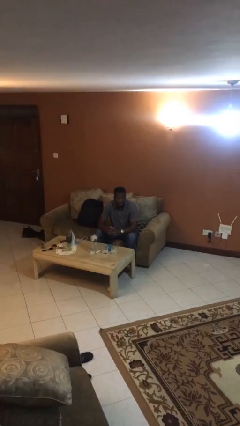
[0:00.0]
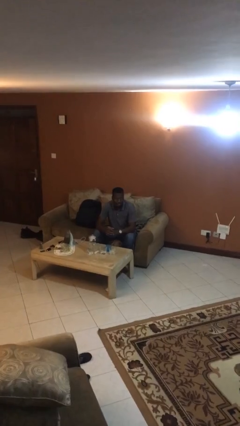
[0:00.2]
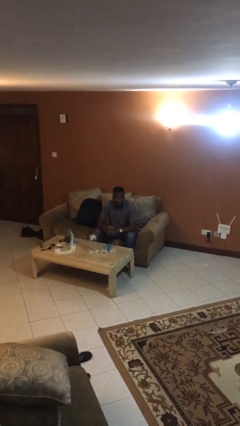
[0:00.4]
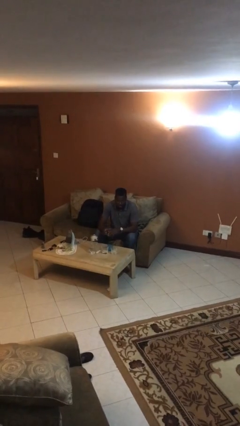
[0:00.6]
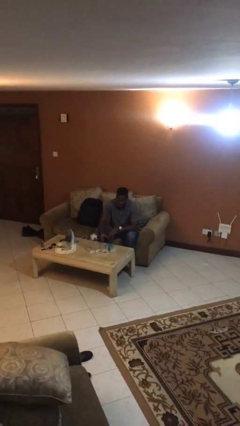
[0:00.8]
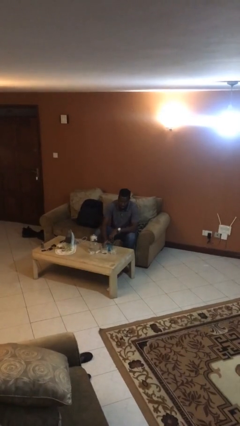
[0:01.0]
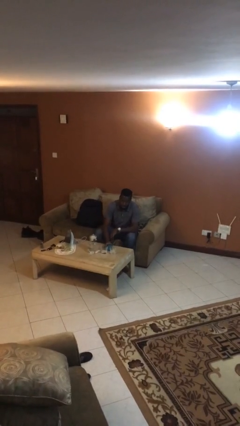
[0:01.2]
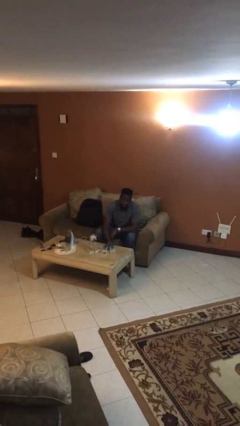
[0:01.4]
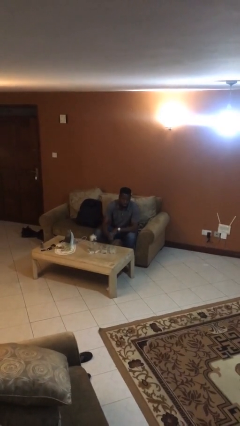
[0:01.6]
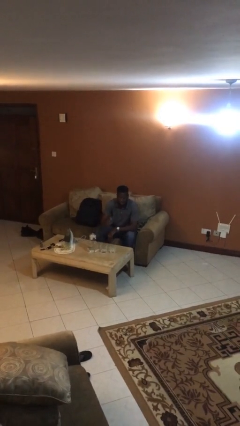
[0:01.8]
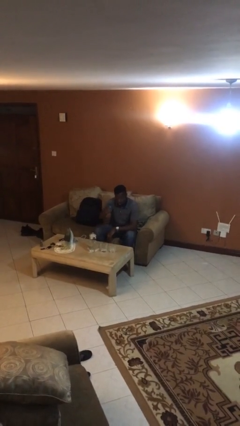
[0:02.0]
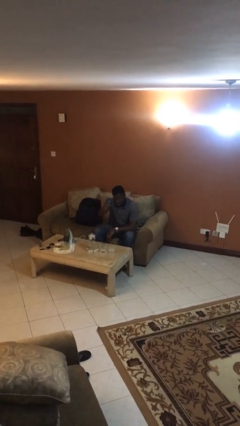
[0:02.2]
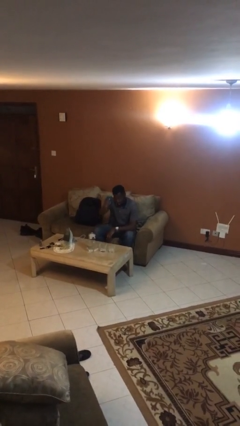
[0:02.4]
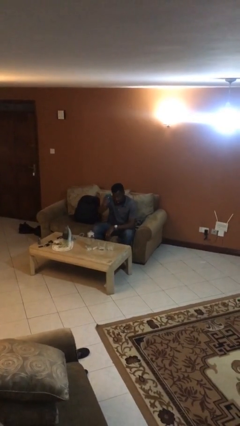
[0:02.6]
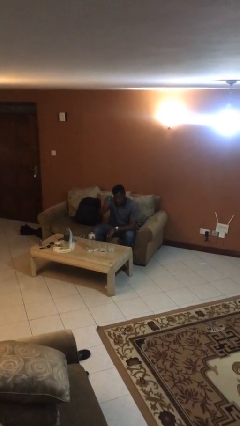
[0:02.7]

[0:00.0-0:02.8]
person picks up object from table

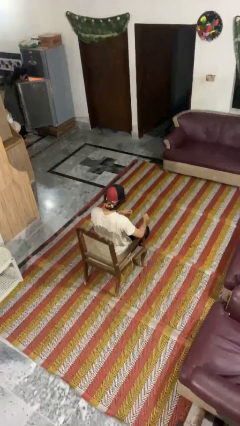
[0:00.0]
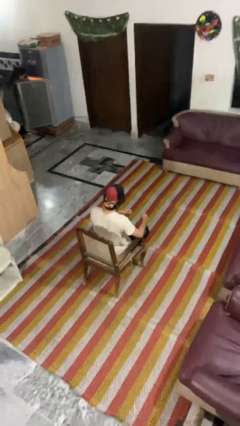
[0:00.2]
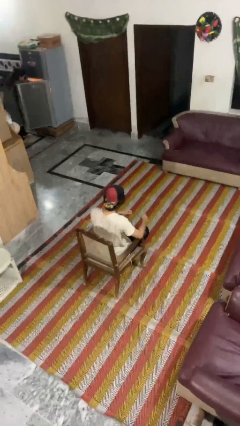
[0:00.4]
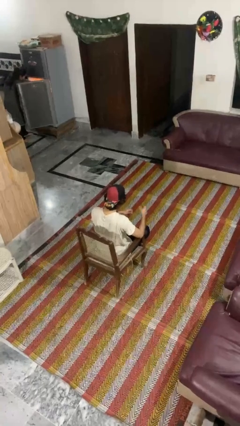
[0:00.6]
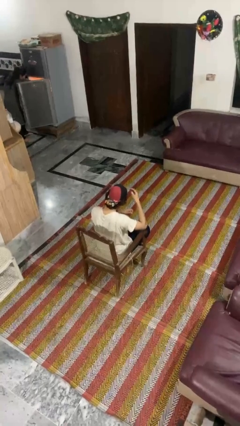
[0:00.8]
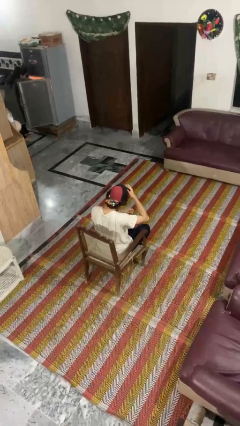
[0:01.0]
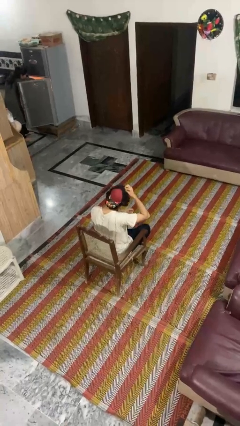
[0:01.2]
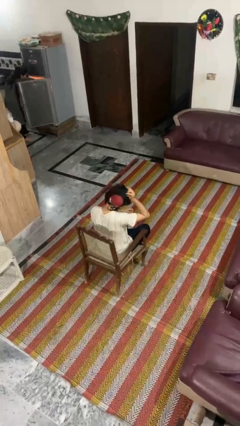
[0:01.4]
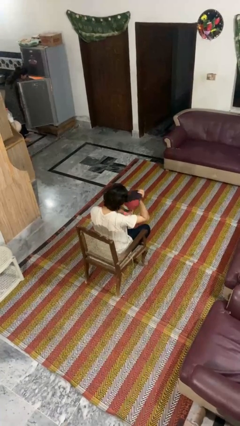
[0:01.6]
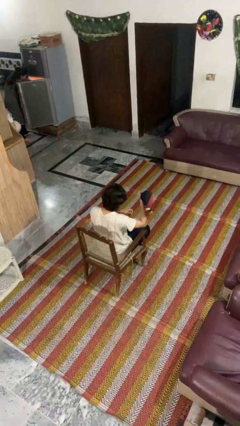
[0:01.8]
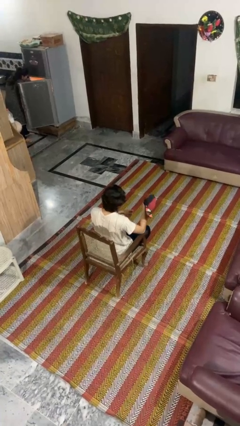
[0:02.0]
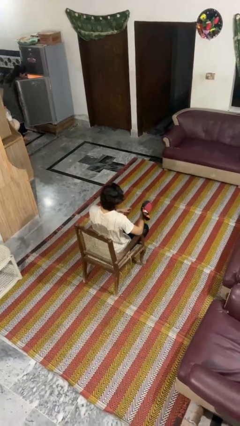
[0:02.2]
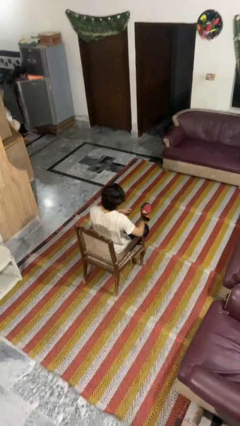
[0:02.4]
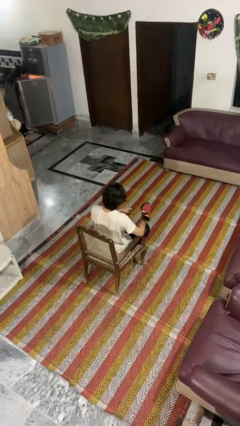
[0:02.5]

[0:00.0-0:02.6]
person takes off hat

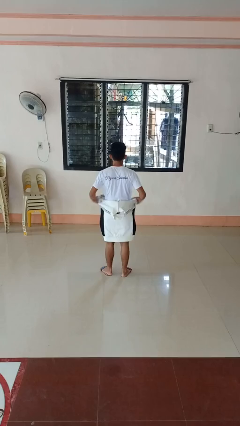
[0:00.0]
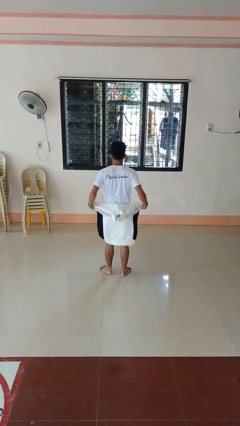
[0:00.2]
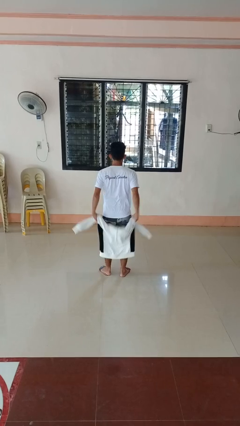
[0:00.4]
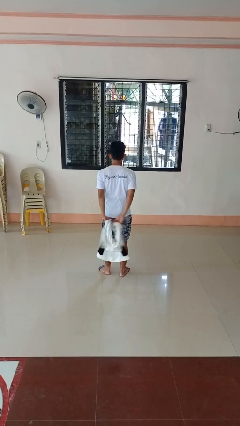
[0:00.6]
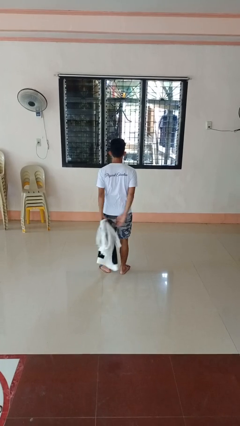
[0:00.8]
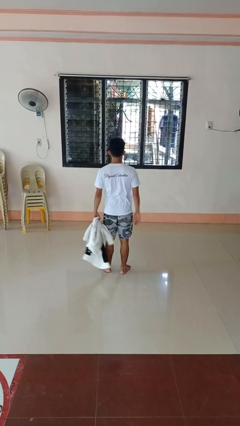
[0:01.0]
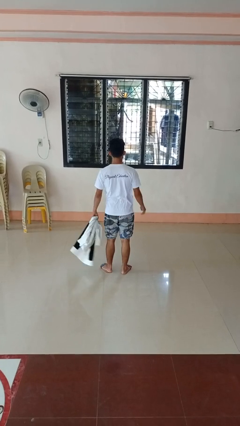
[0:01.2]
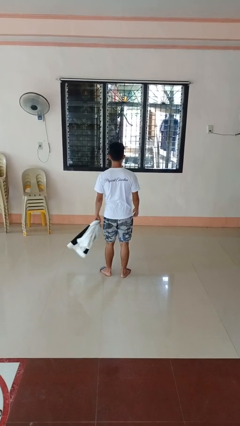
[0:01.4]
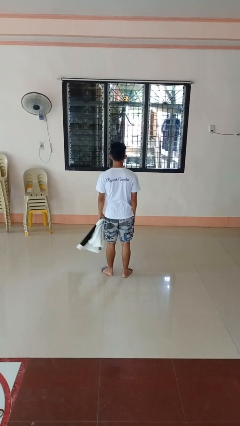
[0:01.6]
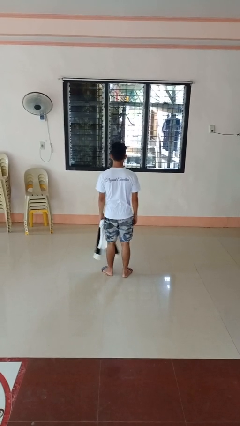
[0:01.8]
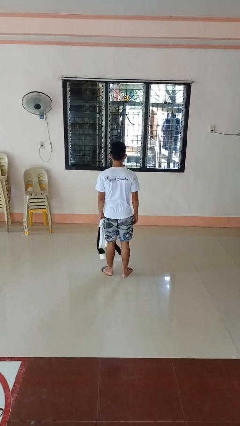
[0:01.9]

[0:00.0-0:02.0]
person unties jacket around waist

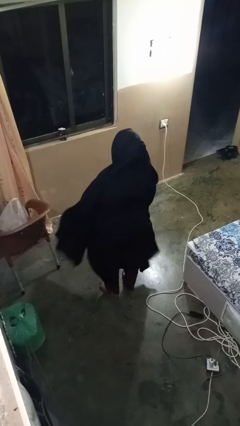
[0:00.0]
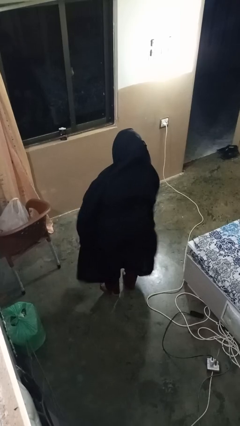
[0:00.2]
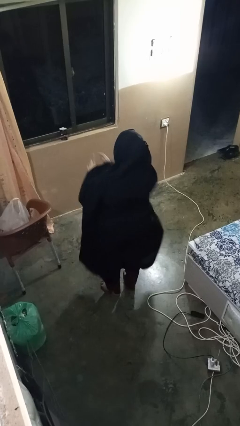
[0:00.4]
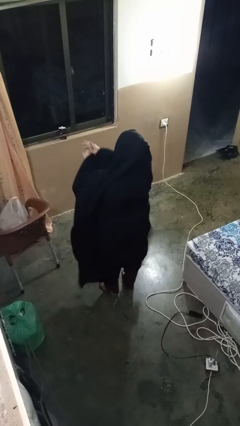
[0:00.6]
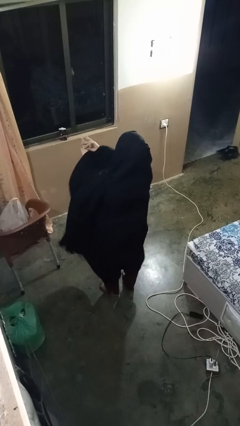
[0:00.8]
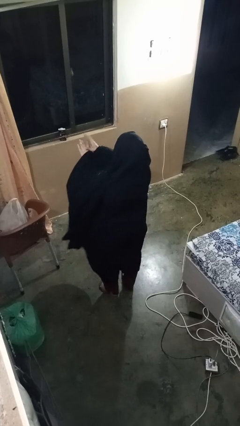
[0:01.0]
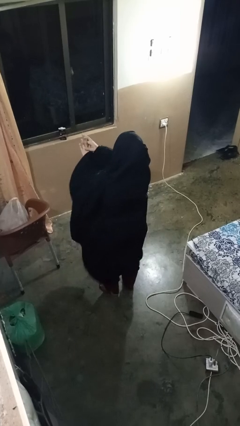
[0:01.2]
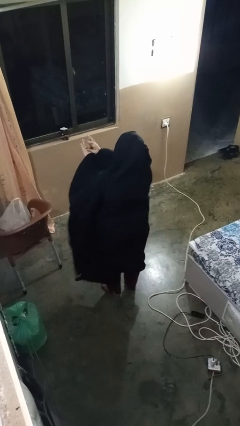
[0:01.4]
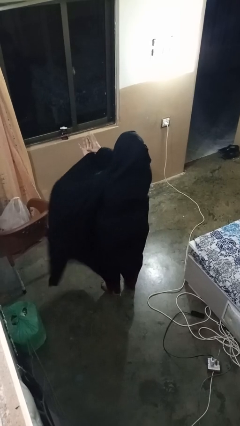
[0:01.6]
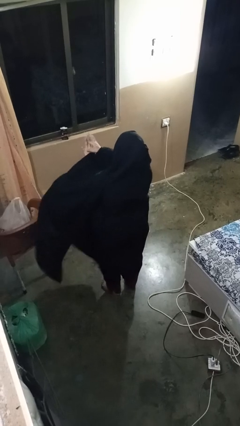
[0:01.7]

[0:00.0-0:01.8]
person cracks knuckles

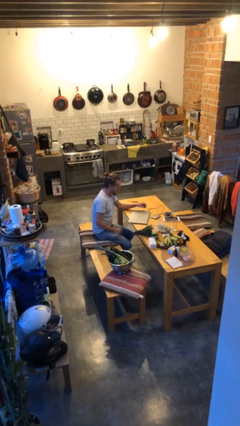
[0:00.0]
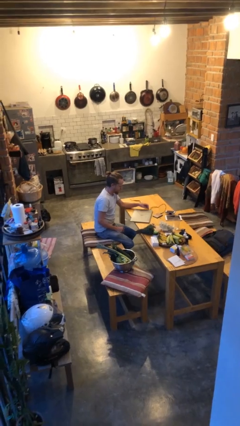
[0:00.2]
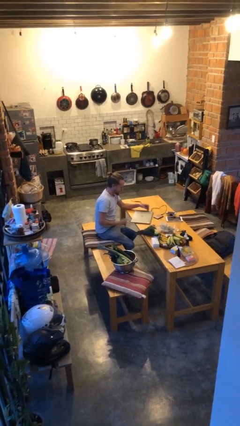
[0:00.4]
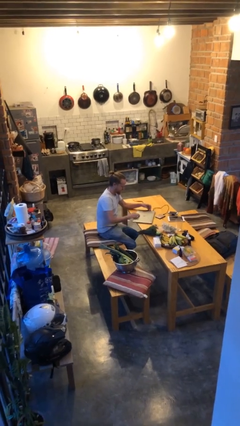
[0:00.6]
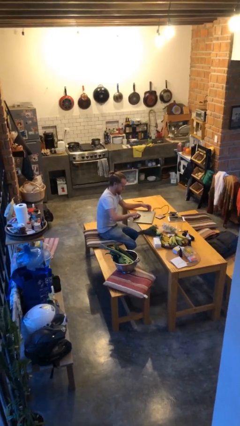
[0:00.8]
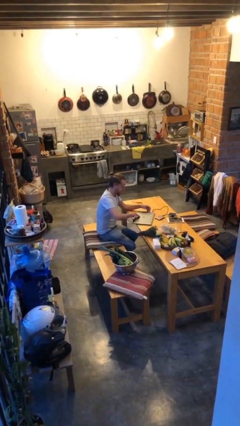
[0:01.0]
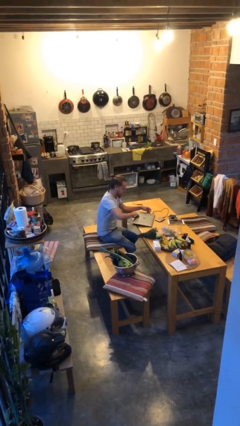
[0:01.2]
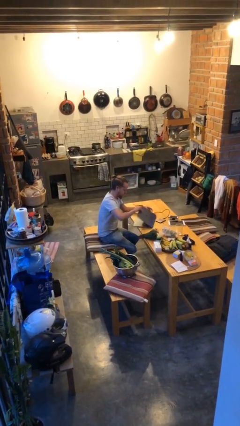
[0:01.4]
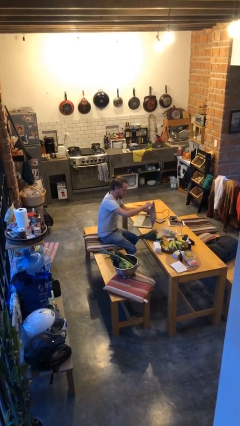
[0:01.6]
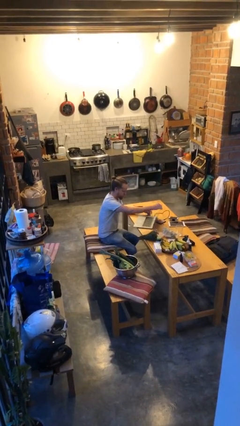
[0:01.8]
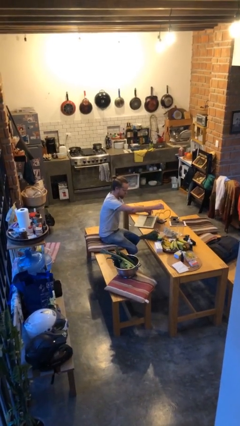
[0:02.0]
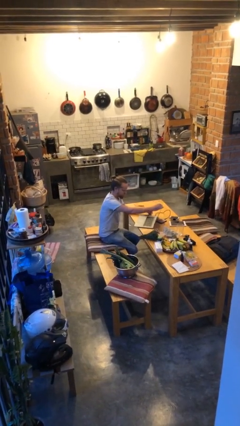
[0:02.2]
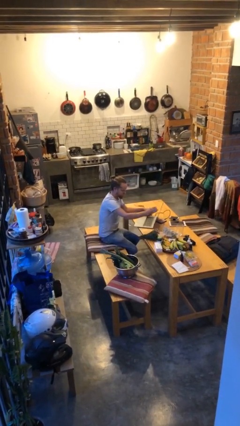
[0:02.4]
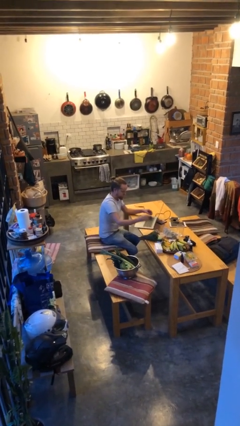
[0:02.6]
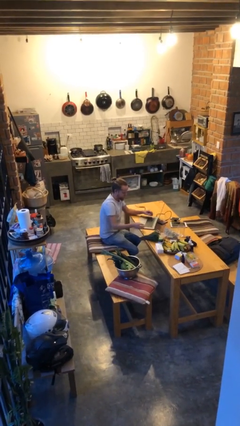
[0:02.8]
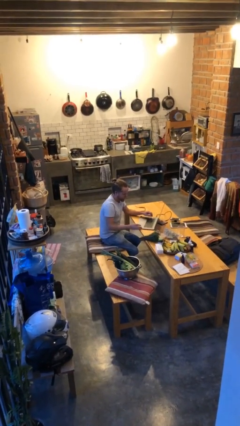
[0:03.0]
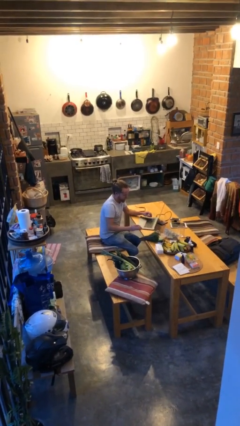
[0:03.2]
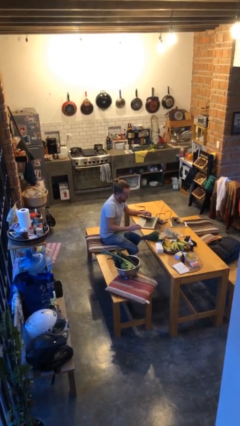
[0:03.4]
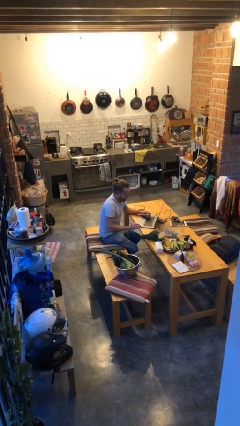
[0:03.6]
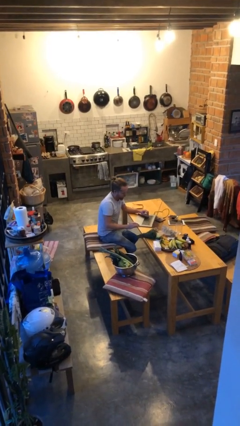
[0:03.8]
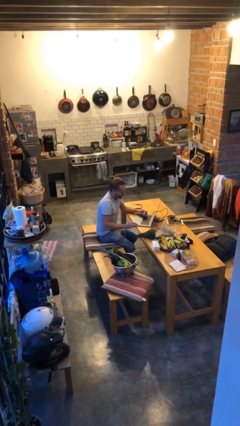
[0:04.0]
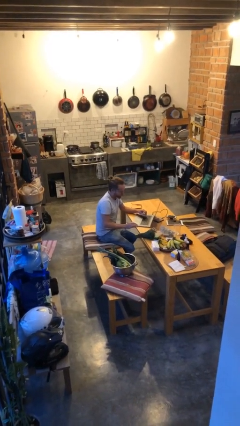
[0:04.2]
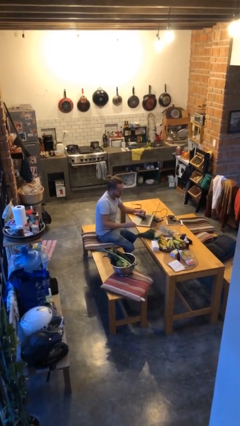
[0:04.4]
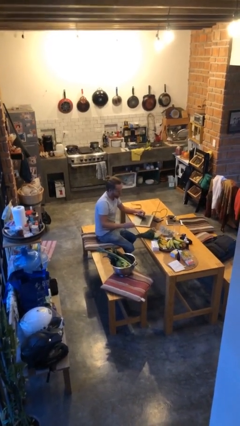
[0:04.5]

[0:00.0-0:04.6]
person opens laptop

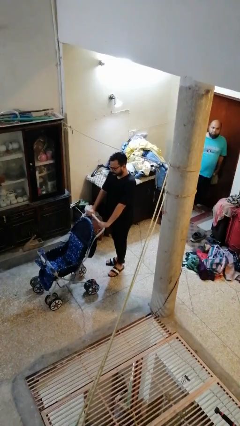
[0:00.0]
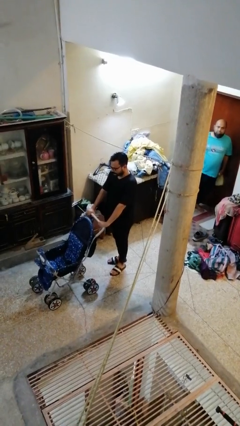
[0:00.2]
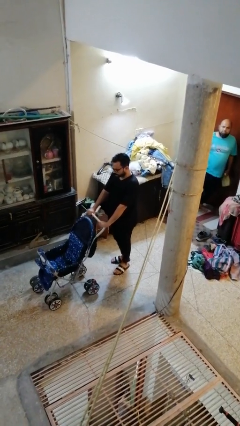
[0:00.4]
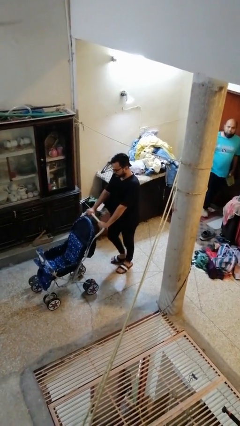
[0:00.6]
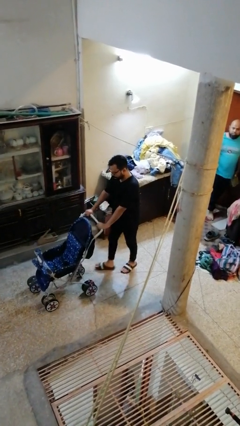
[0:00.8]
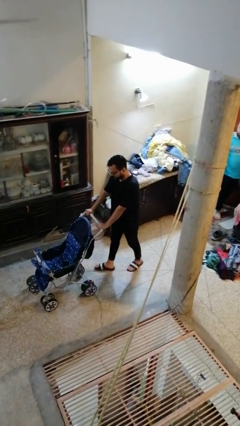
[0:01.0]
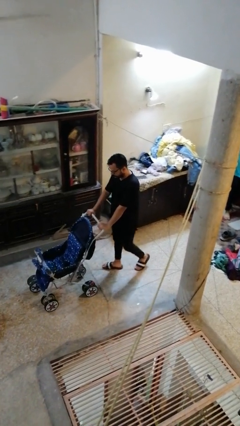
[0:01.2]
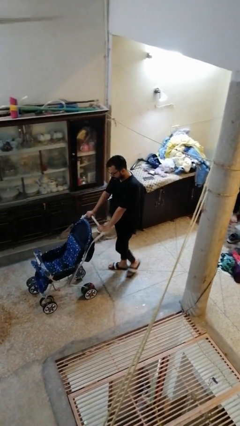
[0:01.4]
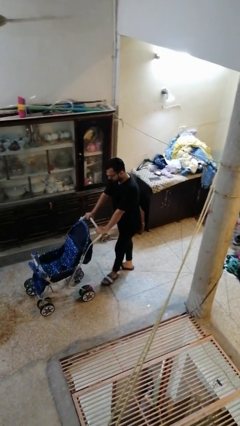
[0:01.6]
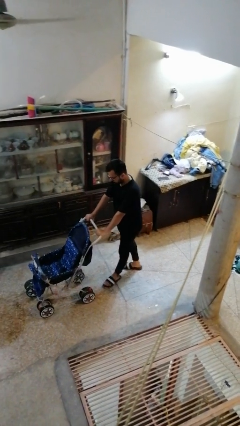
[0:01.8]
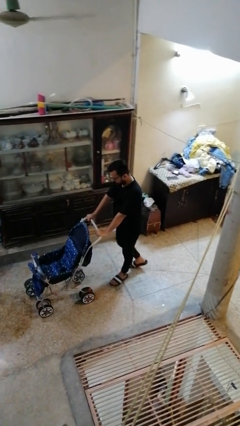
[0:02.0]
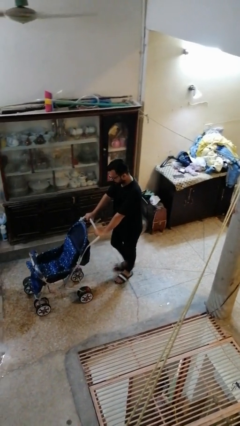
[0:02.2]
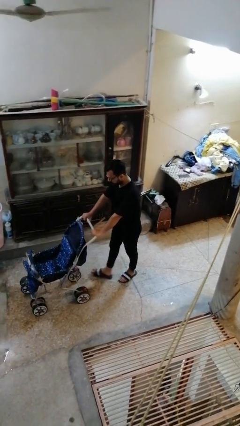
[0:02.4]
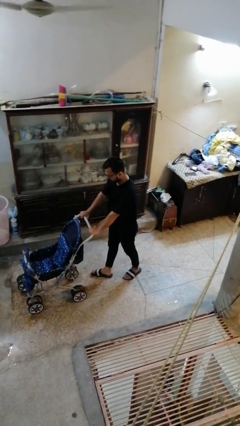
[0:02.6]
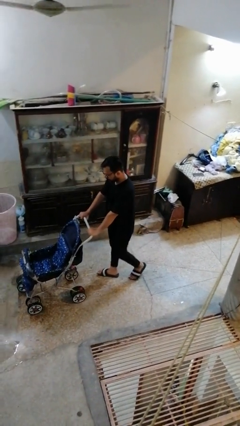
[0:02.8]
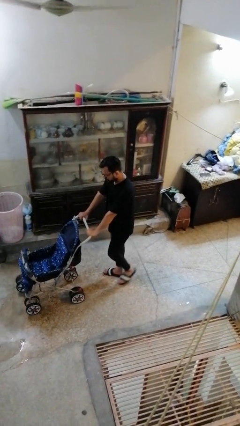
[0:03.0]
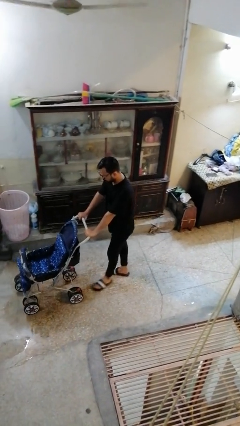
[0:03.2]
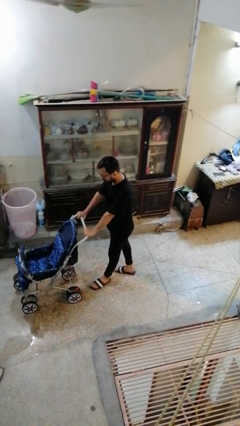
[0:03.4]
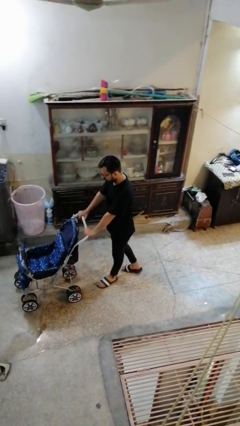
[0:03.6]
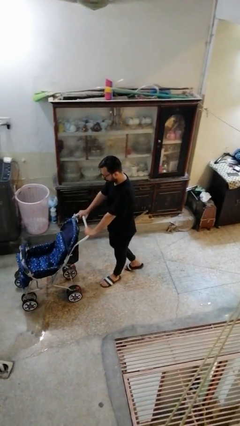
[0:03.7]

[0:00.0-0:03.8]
person pushes wheeled cart

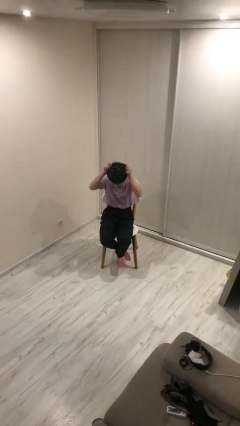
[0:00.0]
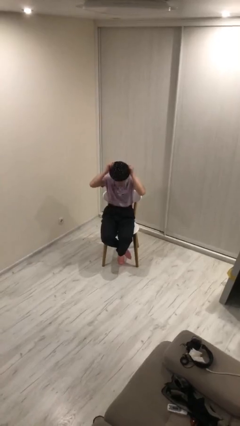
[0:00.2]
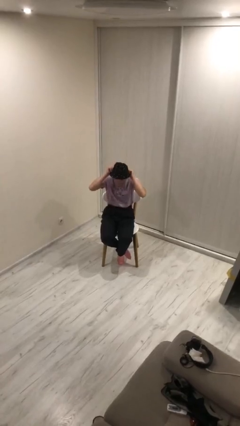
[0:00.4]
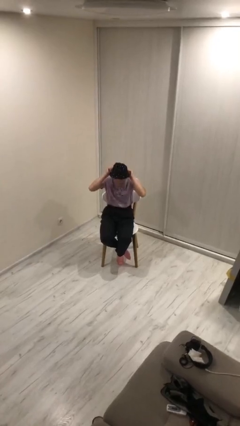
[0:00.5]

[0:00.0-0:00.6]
person puts on hat
